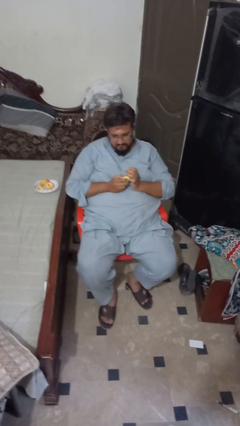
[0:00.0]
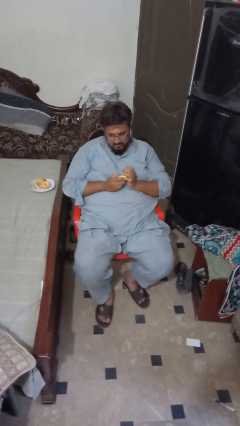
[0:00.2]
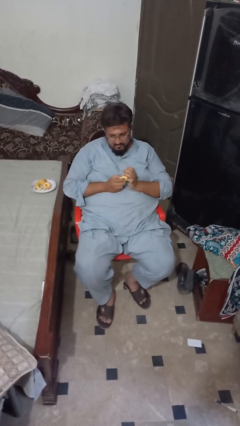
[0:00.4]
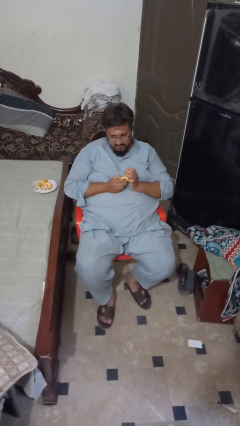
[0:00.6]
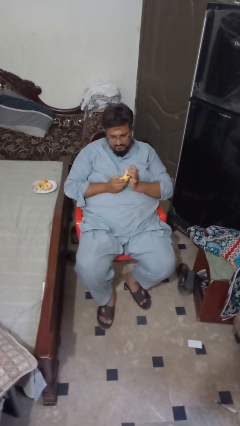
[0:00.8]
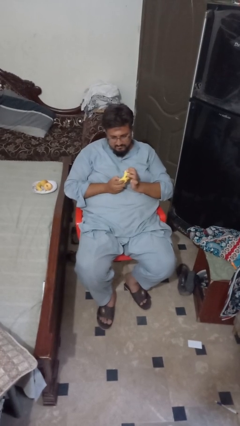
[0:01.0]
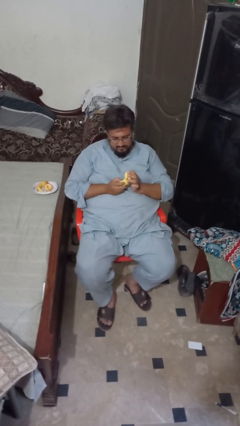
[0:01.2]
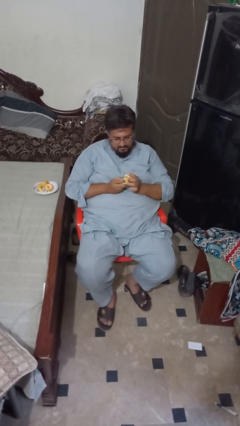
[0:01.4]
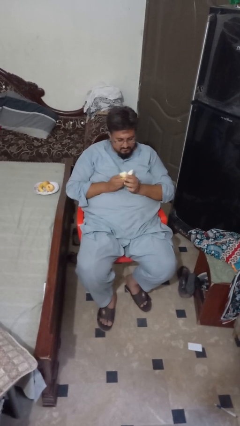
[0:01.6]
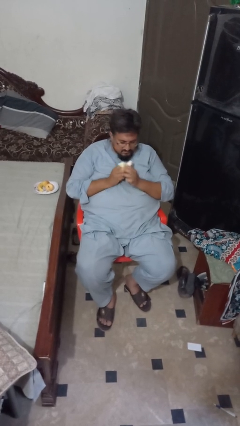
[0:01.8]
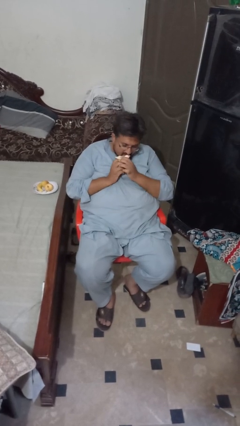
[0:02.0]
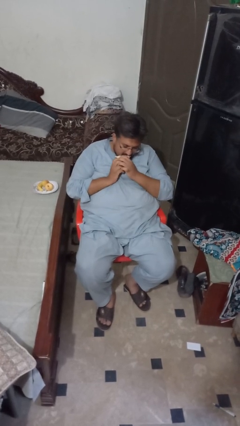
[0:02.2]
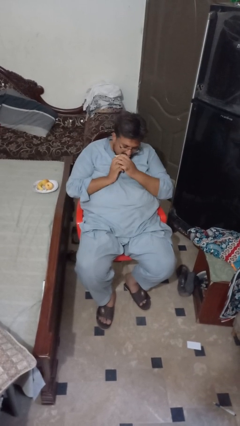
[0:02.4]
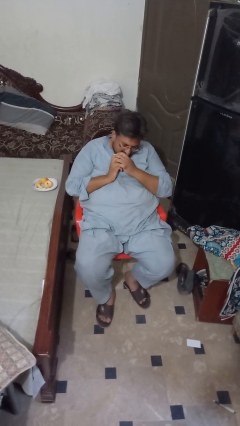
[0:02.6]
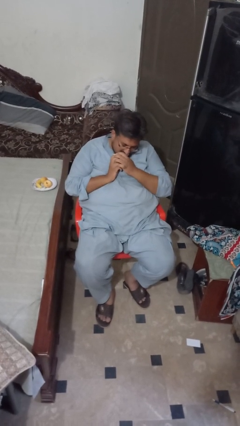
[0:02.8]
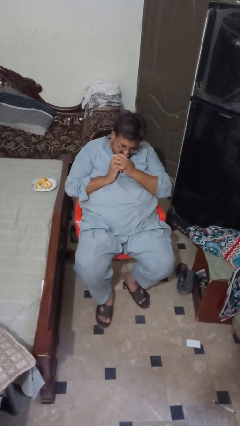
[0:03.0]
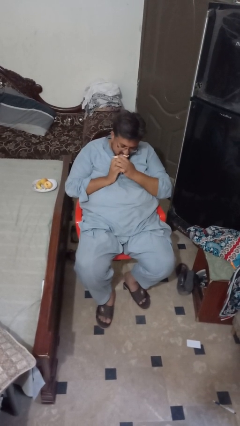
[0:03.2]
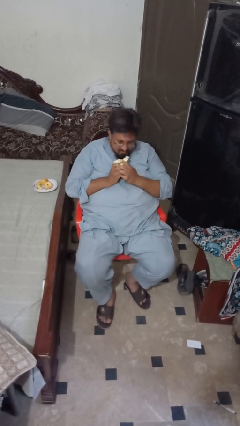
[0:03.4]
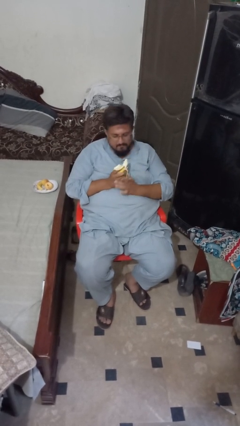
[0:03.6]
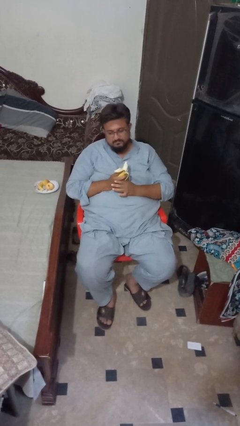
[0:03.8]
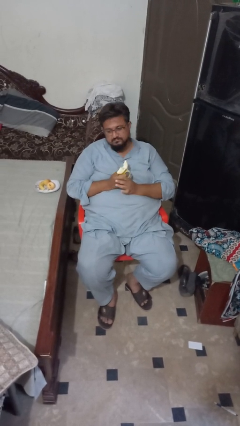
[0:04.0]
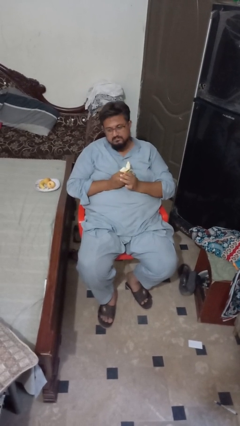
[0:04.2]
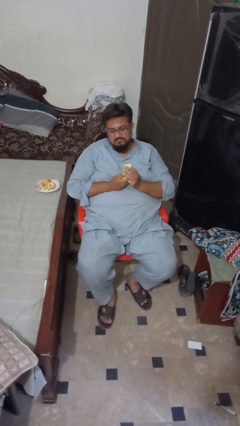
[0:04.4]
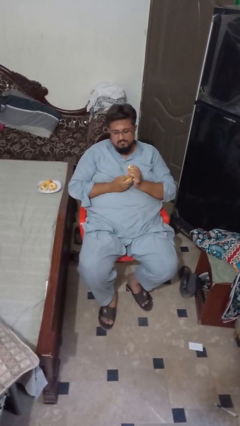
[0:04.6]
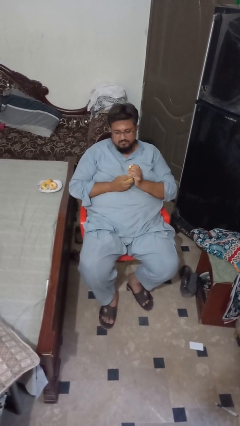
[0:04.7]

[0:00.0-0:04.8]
person eats banana

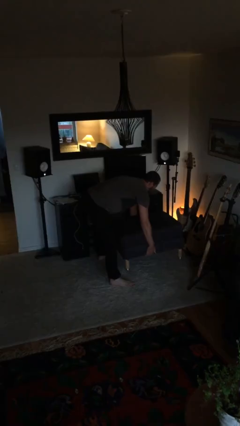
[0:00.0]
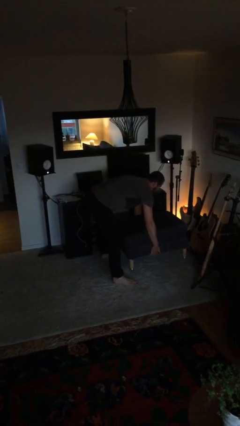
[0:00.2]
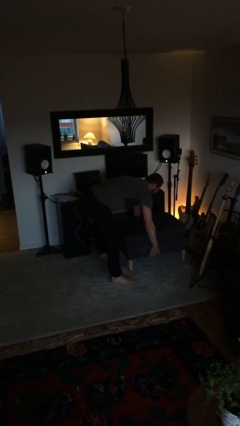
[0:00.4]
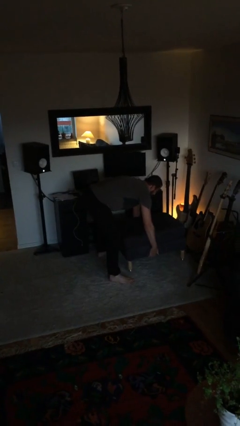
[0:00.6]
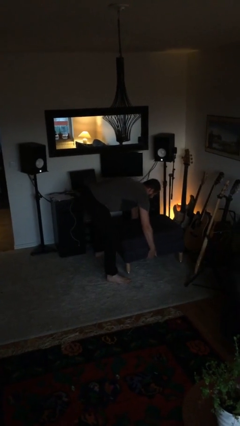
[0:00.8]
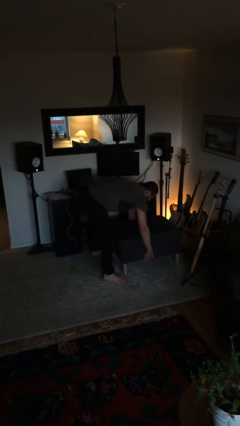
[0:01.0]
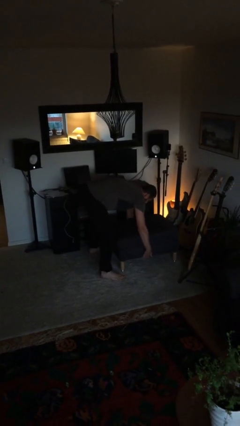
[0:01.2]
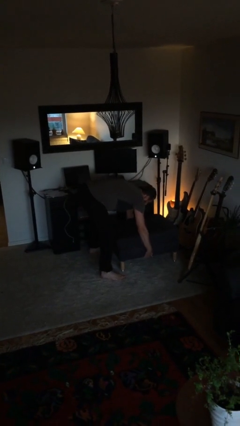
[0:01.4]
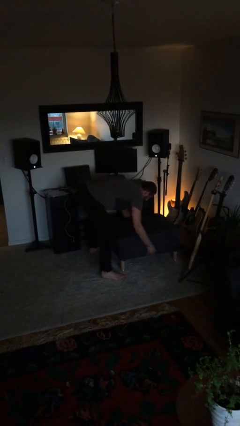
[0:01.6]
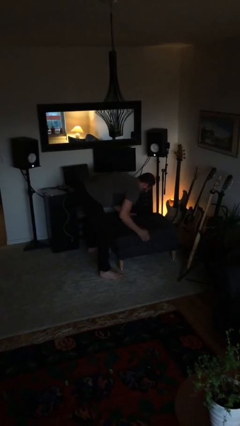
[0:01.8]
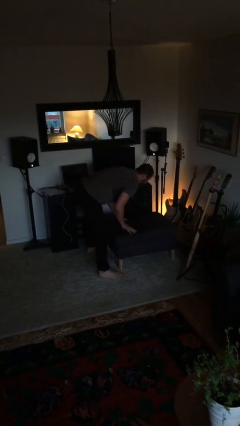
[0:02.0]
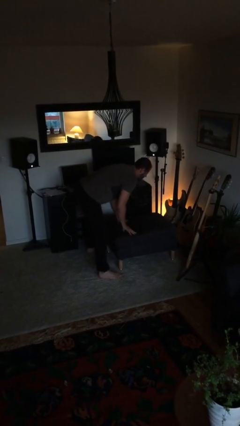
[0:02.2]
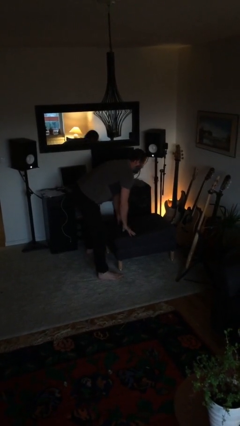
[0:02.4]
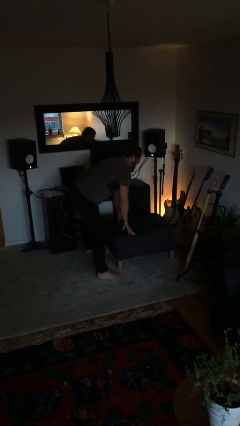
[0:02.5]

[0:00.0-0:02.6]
person puts down object on floor

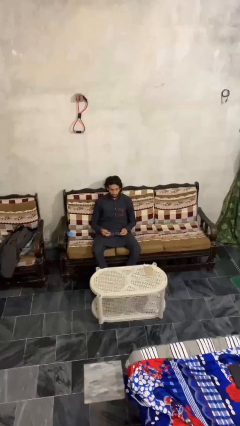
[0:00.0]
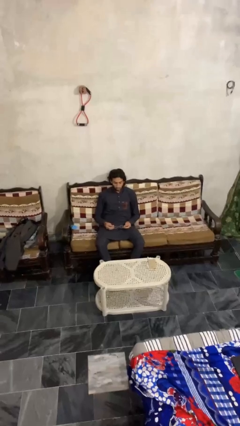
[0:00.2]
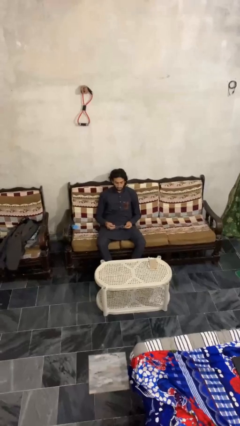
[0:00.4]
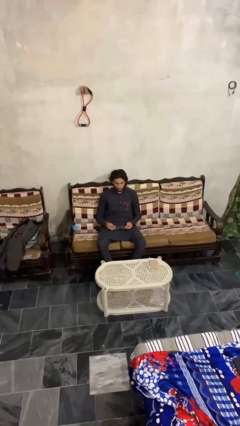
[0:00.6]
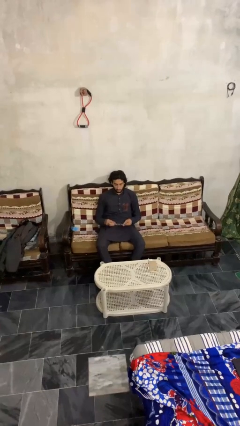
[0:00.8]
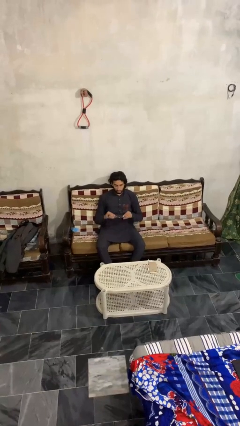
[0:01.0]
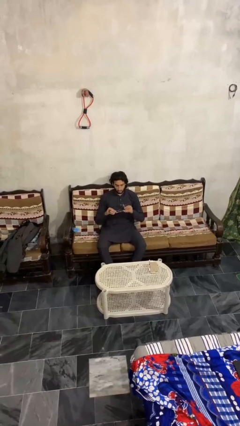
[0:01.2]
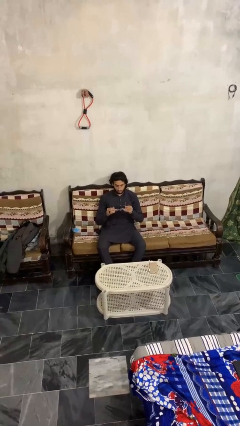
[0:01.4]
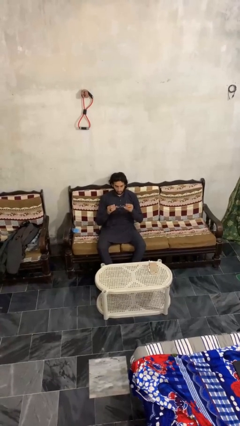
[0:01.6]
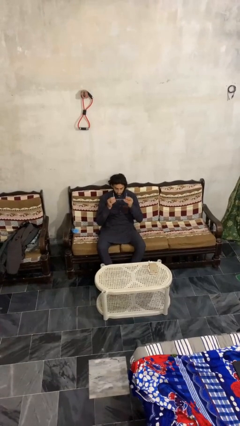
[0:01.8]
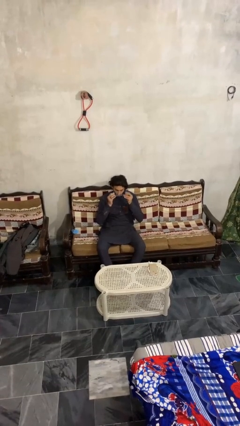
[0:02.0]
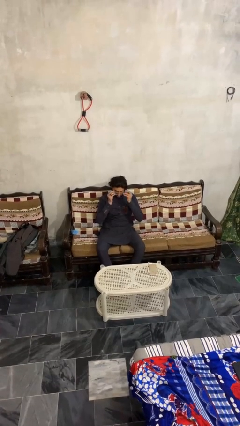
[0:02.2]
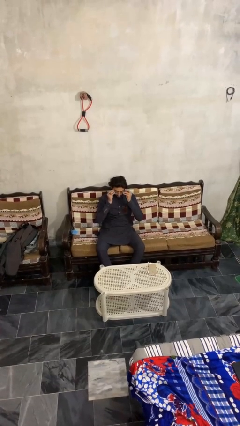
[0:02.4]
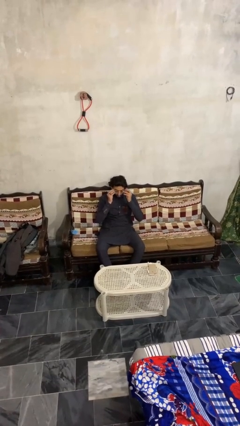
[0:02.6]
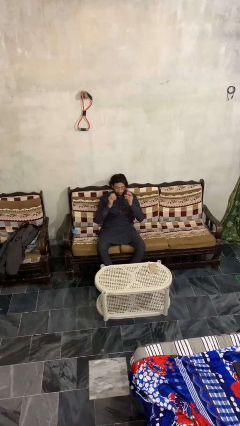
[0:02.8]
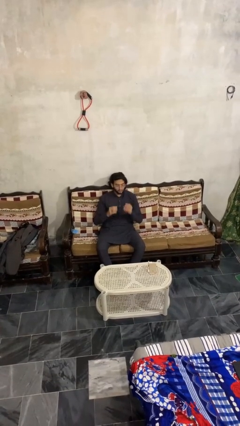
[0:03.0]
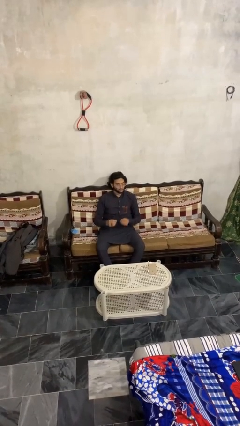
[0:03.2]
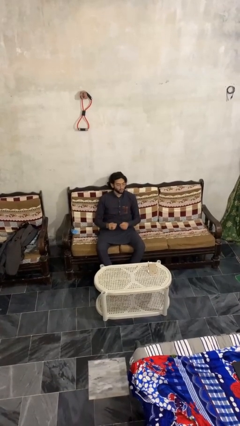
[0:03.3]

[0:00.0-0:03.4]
person puts on glasses

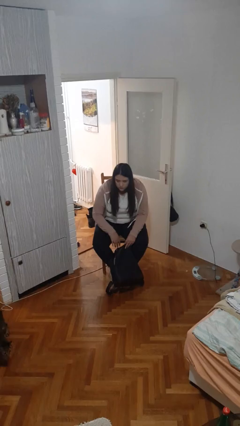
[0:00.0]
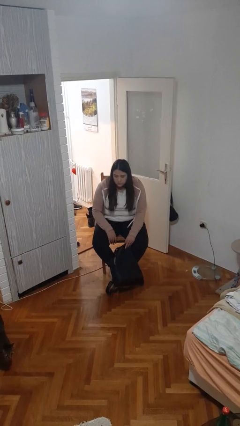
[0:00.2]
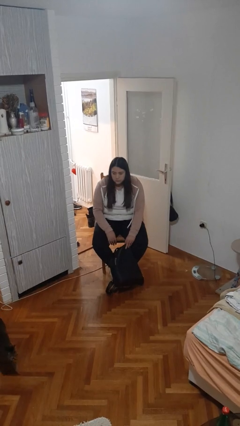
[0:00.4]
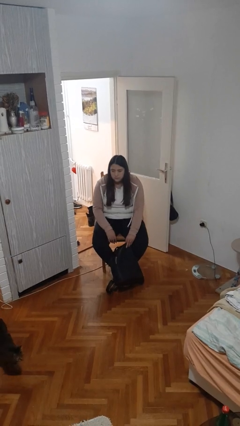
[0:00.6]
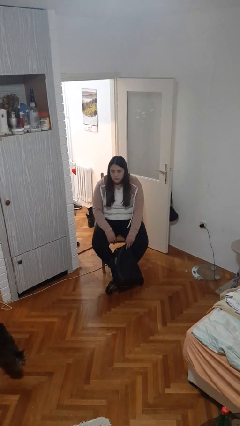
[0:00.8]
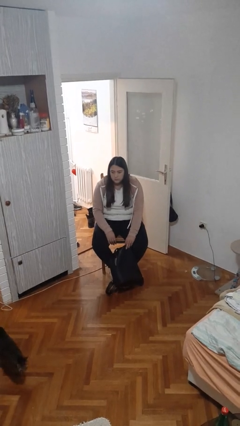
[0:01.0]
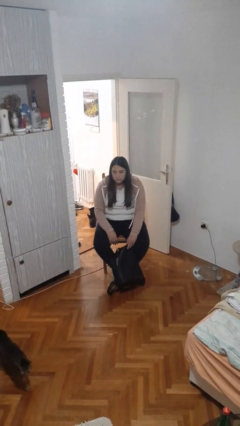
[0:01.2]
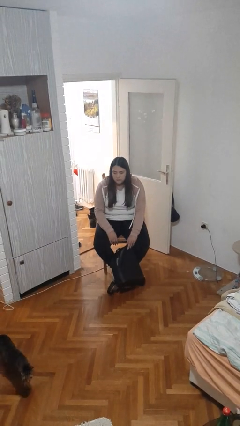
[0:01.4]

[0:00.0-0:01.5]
person puts object into backpack

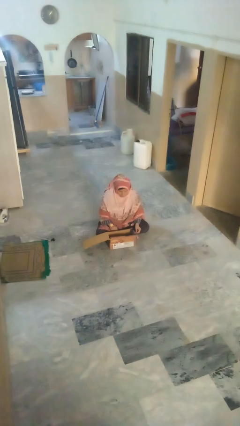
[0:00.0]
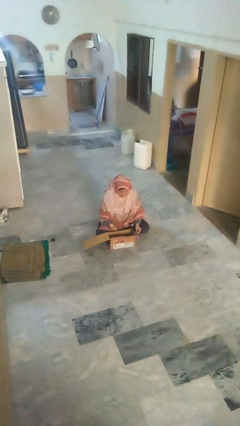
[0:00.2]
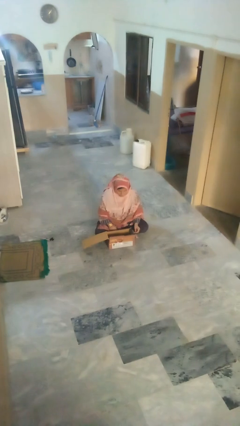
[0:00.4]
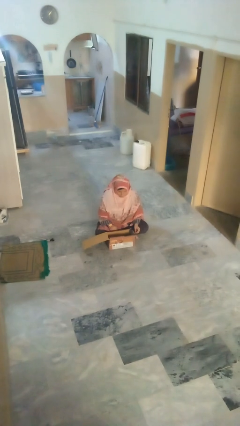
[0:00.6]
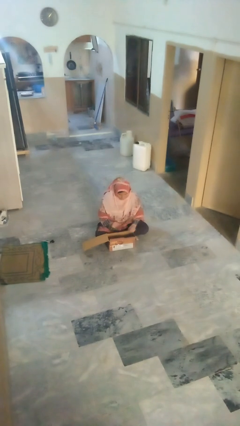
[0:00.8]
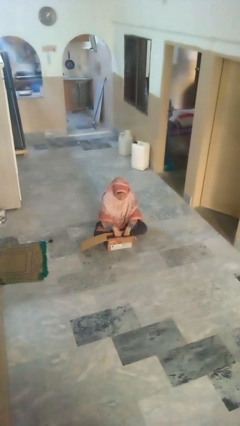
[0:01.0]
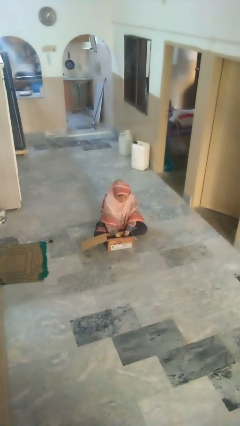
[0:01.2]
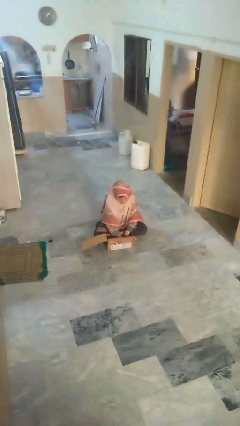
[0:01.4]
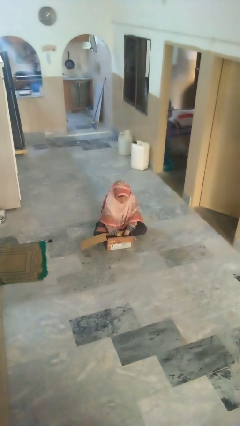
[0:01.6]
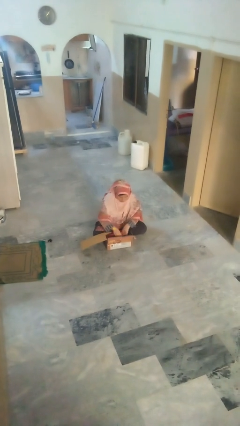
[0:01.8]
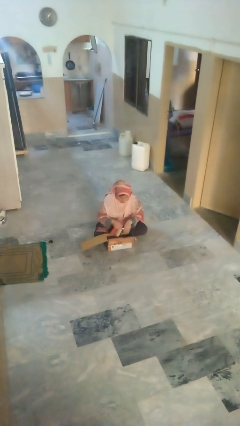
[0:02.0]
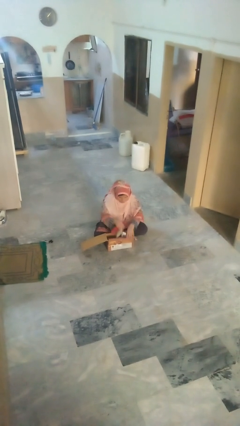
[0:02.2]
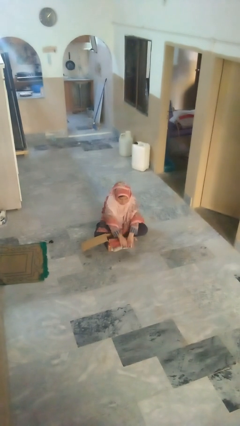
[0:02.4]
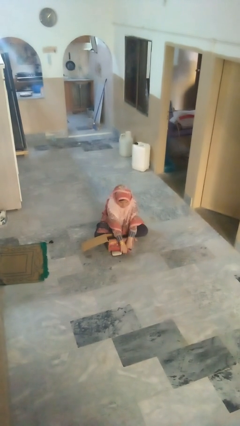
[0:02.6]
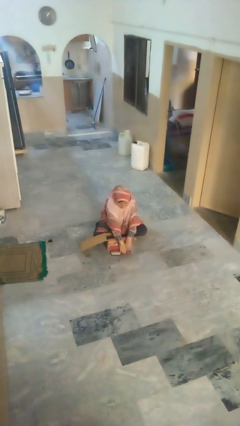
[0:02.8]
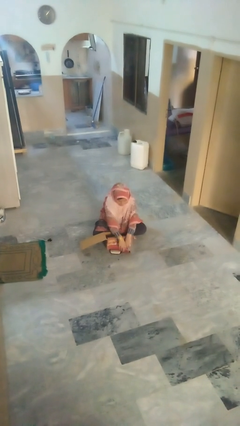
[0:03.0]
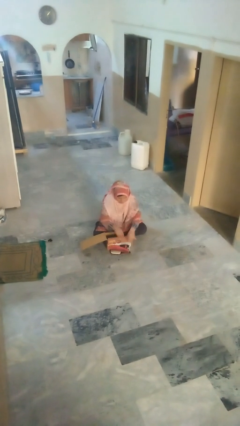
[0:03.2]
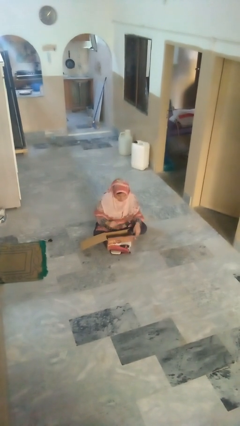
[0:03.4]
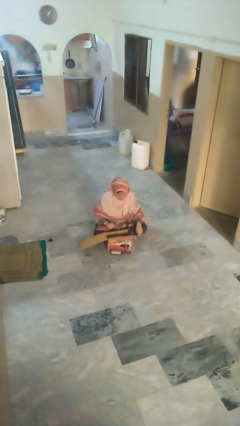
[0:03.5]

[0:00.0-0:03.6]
person takes object from box

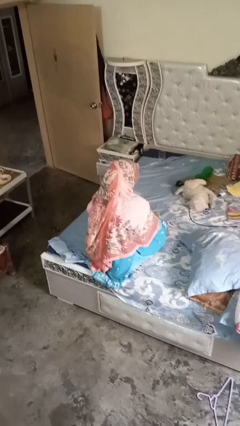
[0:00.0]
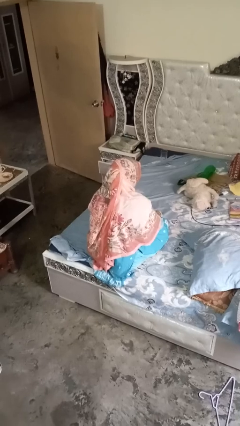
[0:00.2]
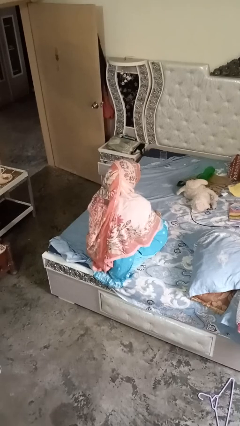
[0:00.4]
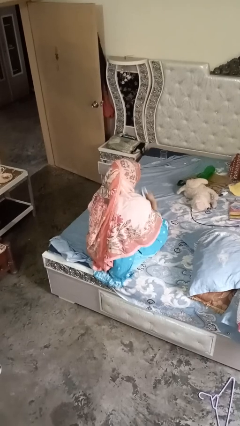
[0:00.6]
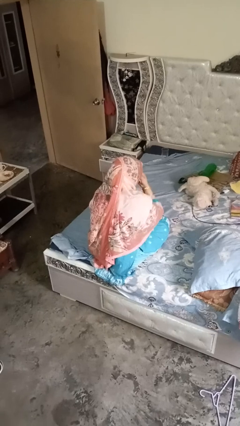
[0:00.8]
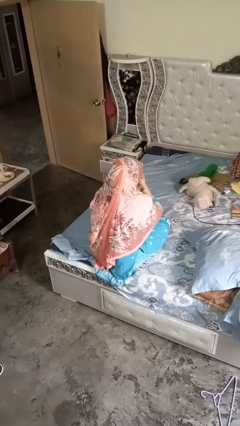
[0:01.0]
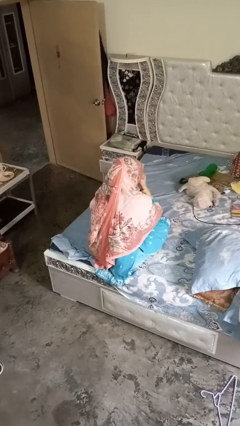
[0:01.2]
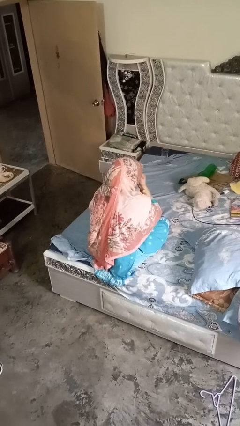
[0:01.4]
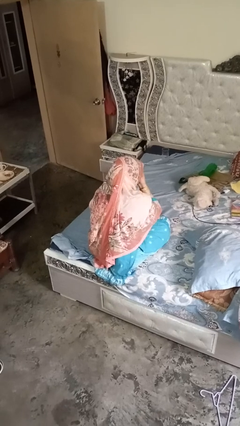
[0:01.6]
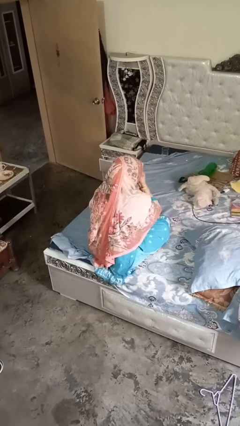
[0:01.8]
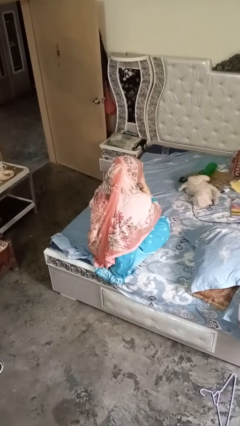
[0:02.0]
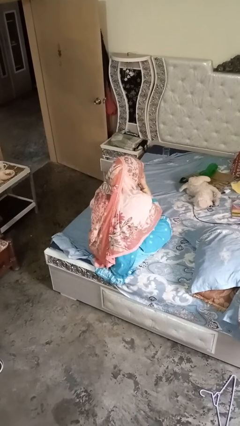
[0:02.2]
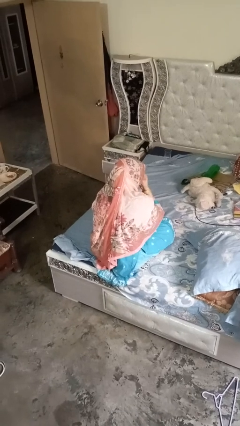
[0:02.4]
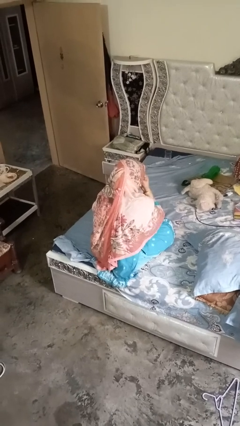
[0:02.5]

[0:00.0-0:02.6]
person blows nose
